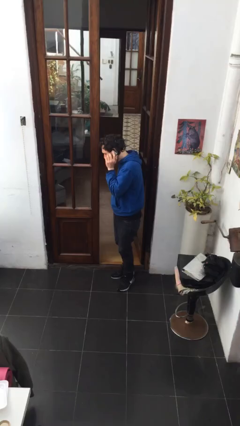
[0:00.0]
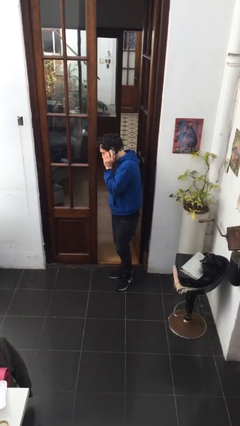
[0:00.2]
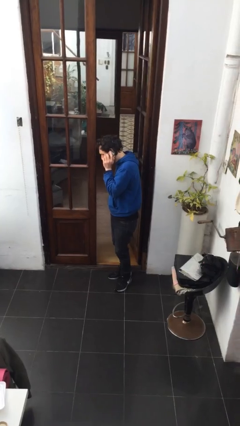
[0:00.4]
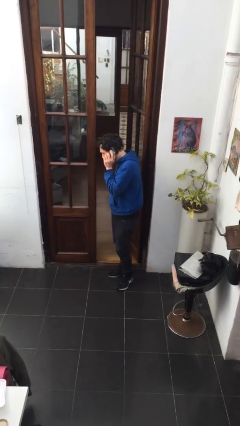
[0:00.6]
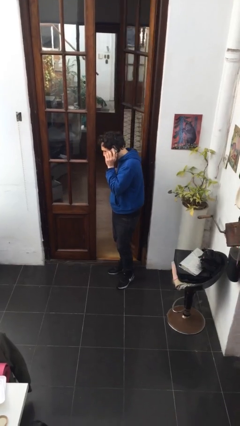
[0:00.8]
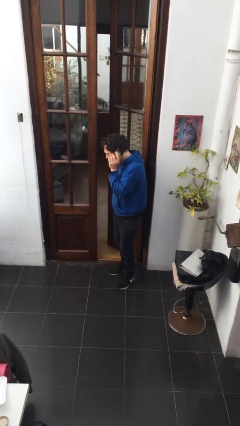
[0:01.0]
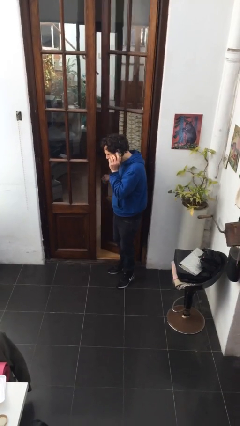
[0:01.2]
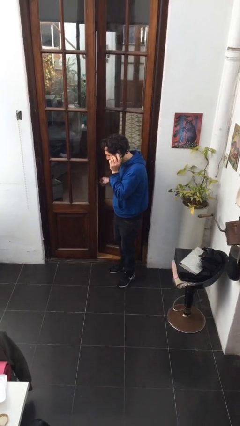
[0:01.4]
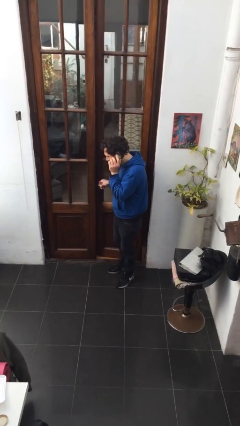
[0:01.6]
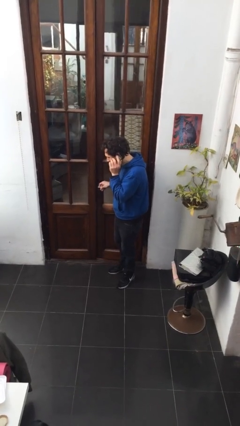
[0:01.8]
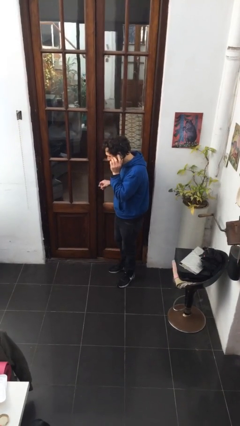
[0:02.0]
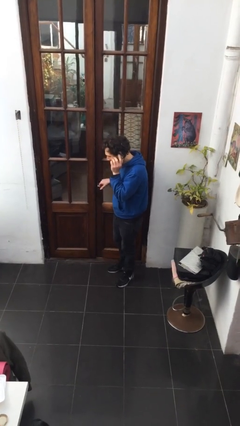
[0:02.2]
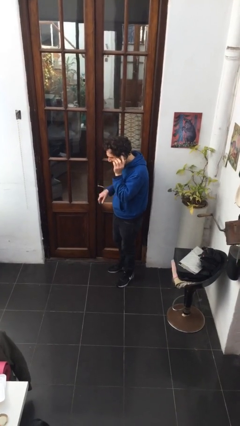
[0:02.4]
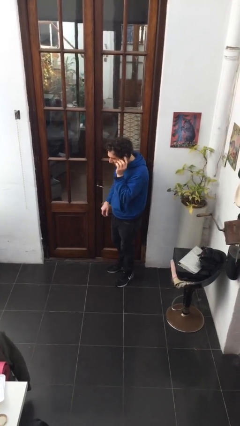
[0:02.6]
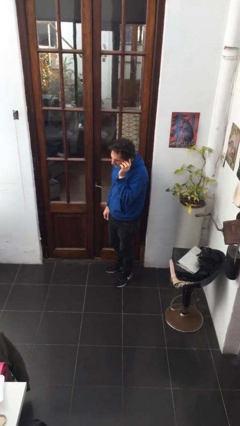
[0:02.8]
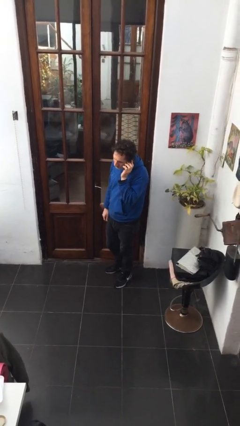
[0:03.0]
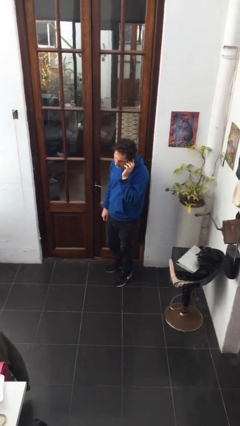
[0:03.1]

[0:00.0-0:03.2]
person closes facility door

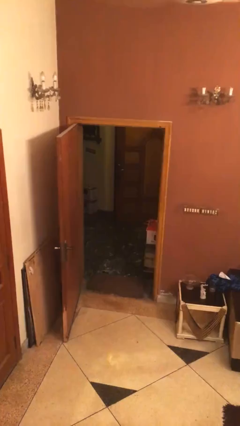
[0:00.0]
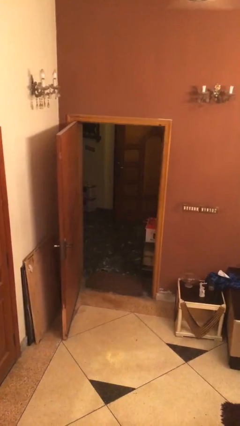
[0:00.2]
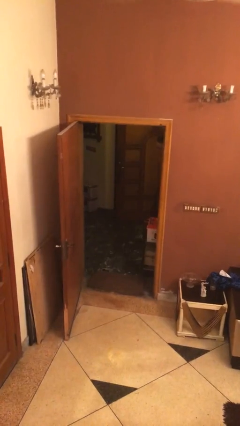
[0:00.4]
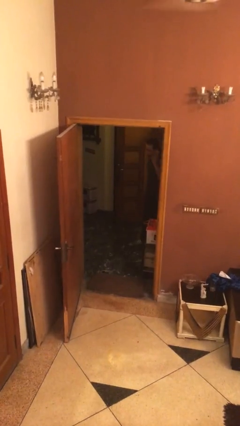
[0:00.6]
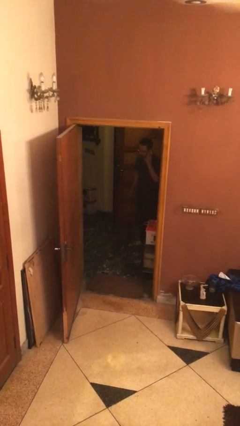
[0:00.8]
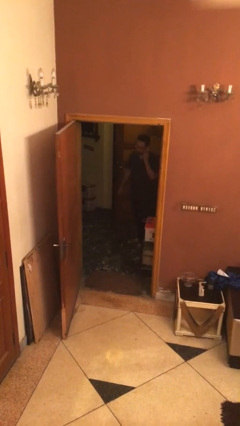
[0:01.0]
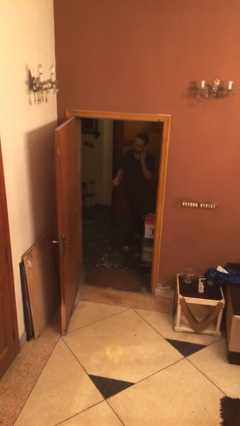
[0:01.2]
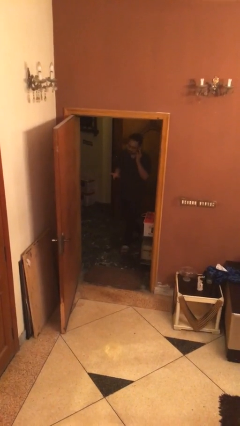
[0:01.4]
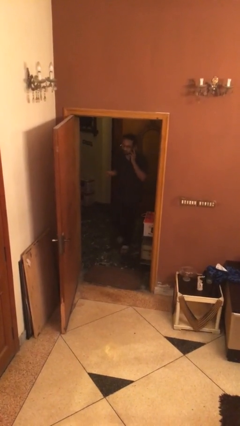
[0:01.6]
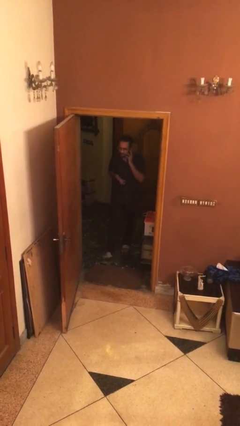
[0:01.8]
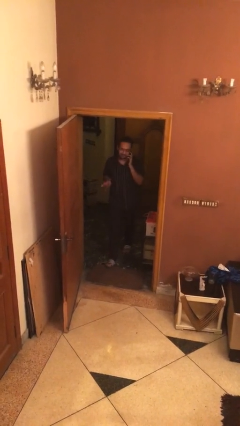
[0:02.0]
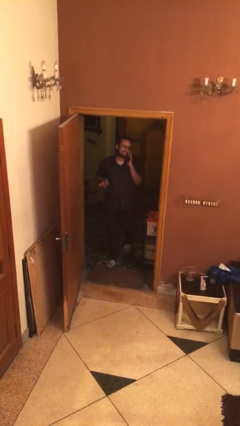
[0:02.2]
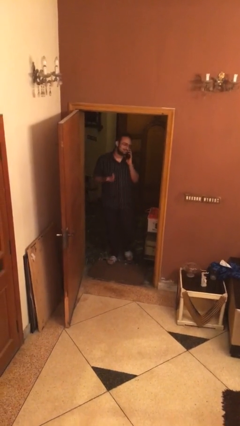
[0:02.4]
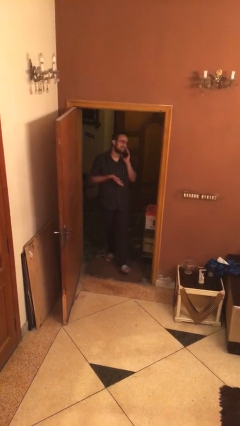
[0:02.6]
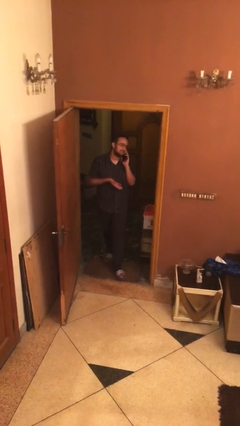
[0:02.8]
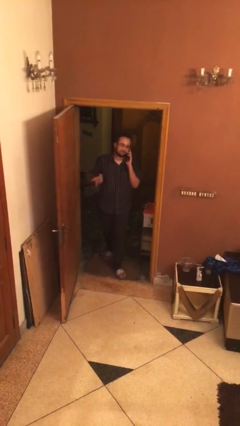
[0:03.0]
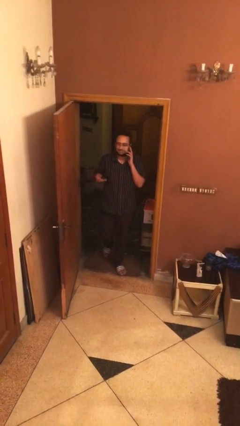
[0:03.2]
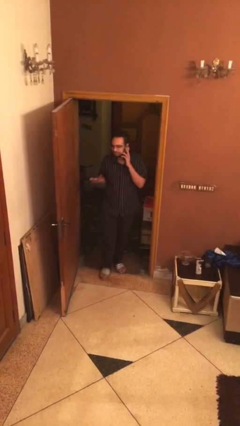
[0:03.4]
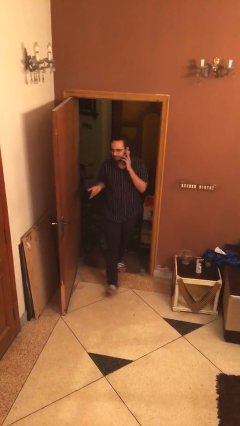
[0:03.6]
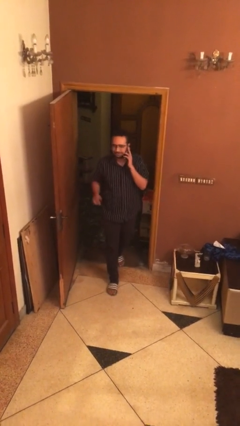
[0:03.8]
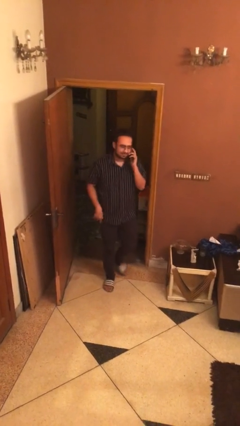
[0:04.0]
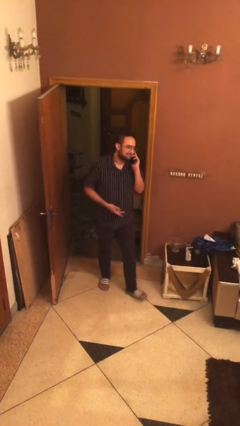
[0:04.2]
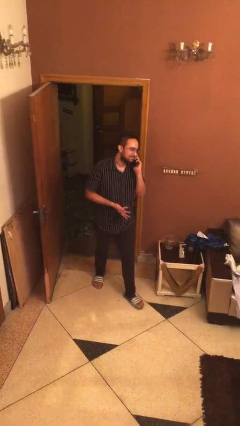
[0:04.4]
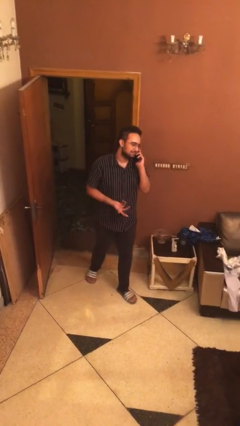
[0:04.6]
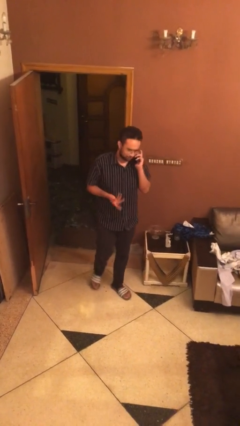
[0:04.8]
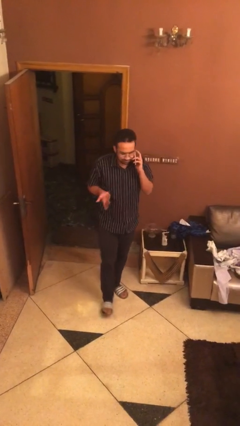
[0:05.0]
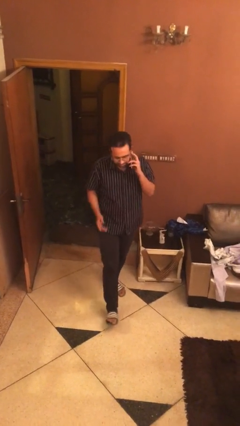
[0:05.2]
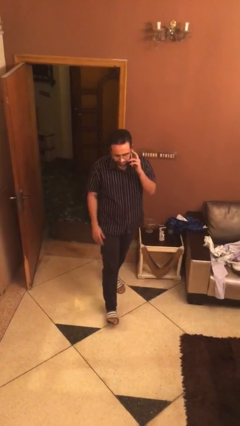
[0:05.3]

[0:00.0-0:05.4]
person enters scene through structure

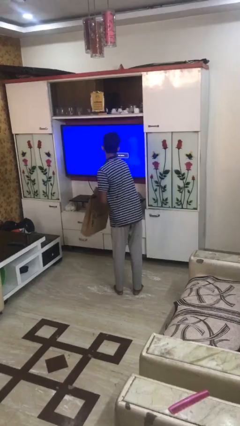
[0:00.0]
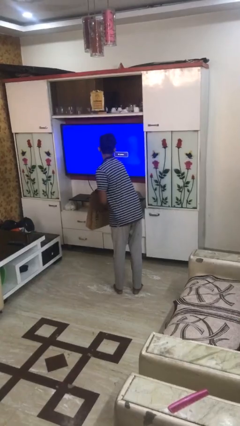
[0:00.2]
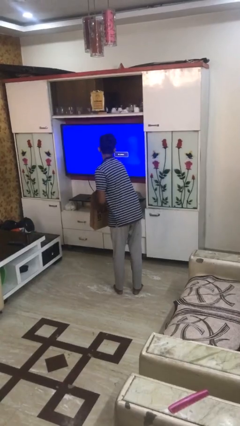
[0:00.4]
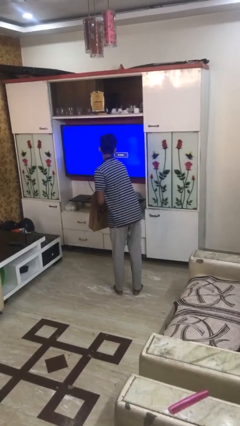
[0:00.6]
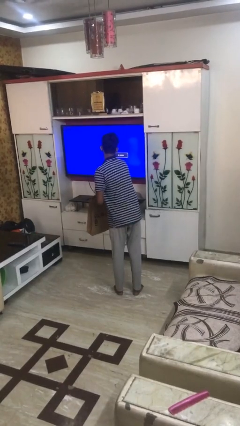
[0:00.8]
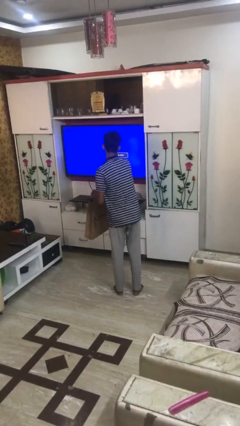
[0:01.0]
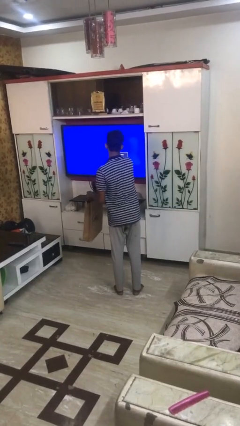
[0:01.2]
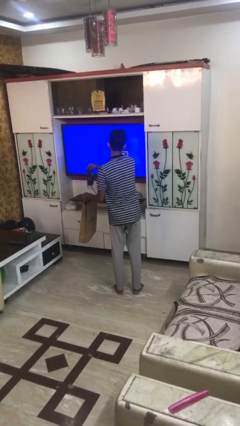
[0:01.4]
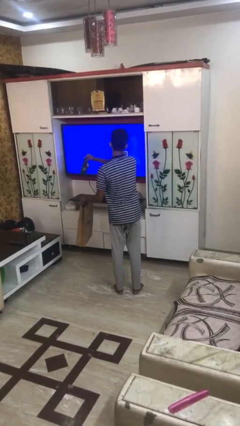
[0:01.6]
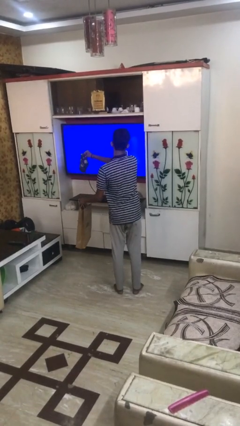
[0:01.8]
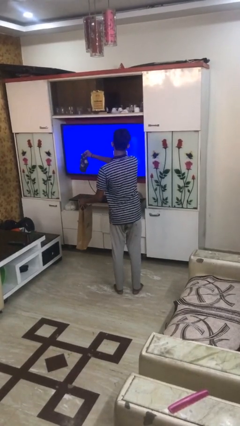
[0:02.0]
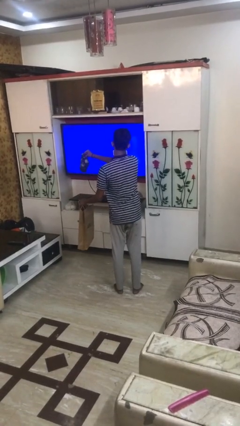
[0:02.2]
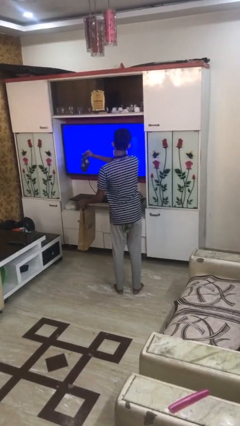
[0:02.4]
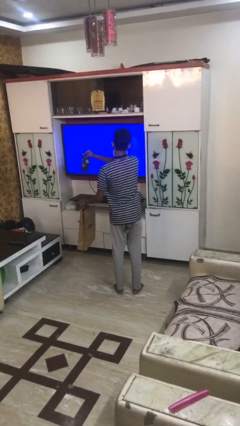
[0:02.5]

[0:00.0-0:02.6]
person takes object from bag

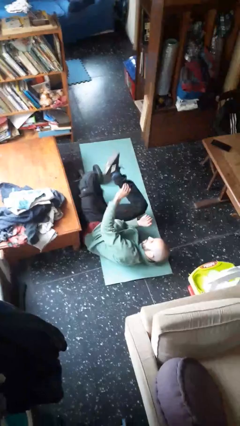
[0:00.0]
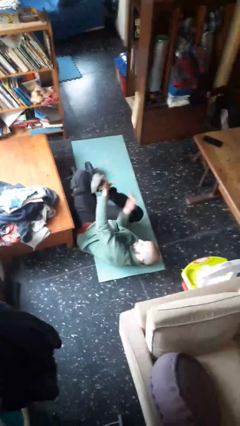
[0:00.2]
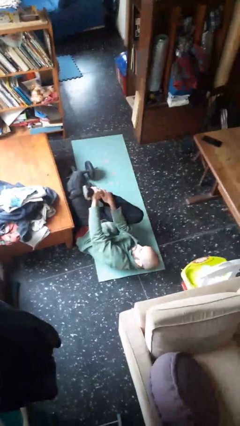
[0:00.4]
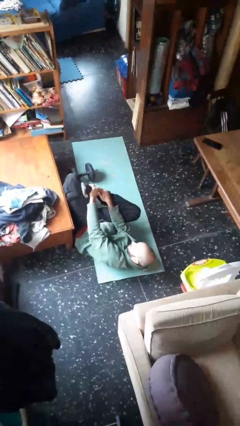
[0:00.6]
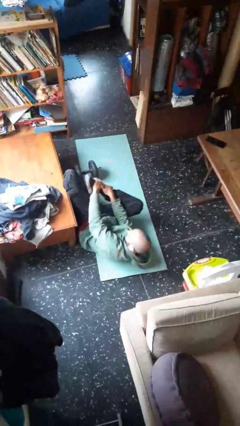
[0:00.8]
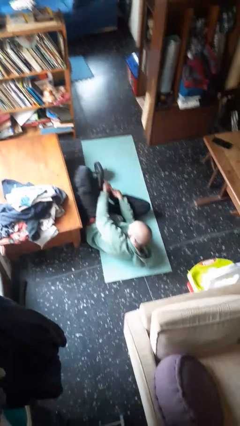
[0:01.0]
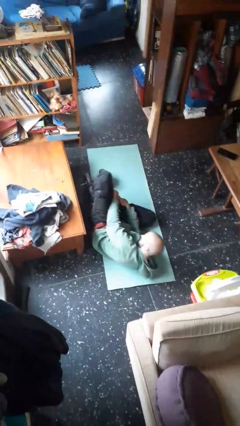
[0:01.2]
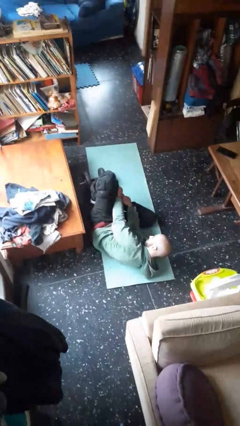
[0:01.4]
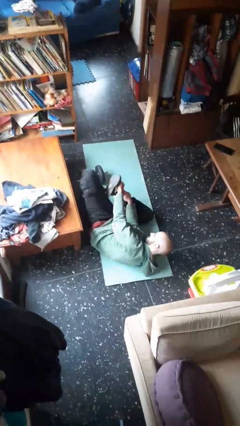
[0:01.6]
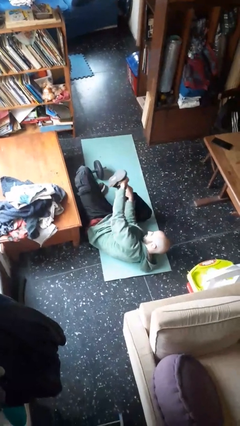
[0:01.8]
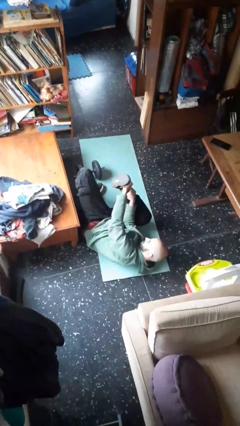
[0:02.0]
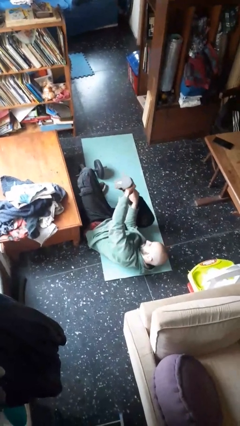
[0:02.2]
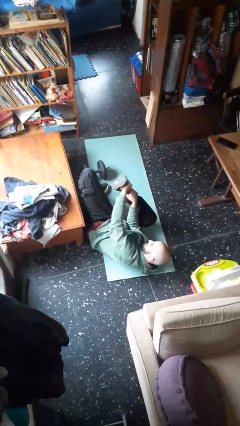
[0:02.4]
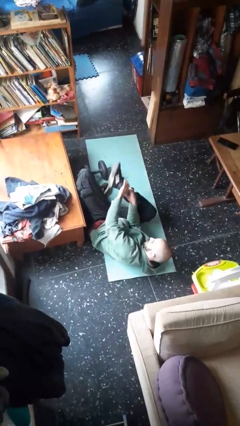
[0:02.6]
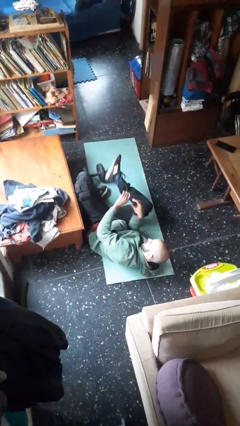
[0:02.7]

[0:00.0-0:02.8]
person lies down on floor

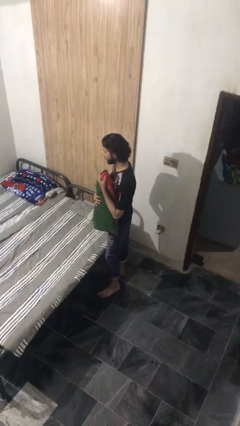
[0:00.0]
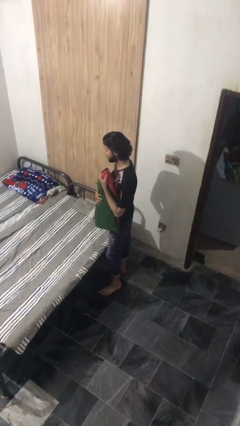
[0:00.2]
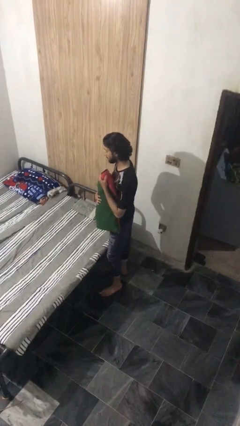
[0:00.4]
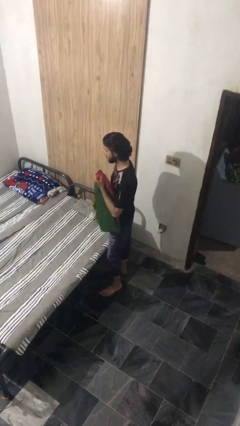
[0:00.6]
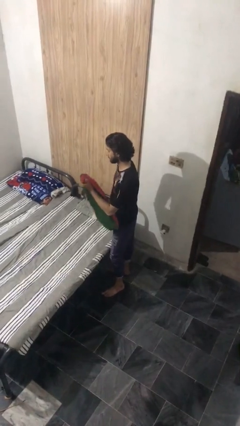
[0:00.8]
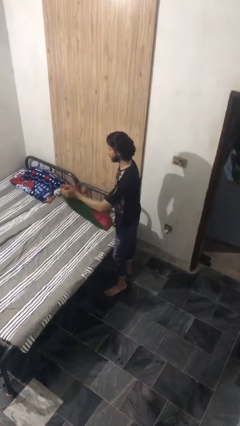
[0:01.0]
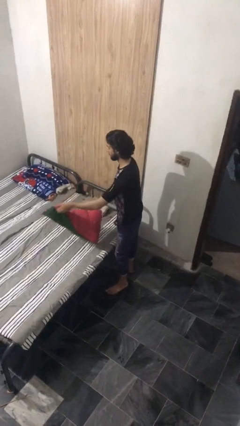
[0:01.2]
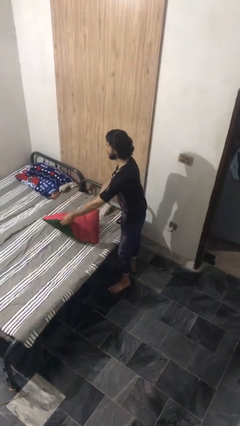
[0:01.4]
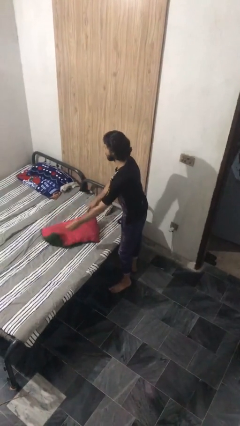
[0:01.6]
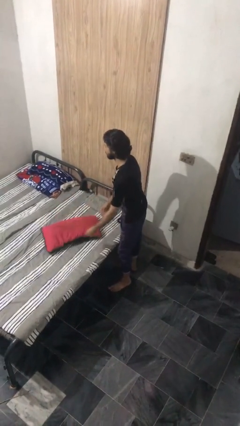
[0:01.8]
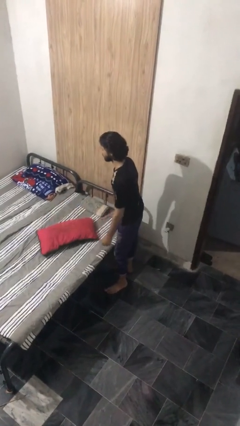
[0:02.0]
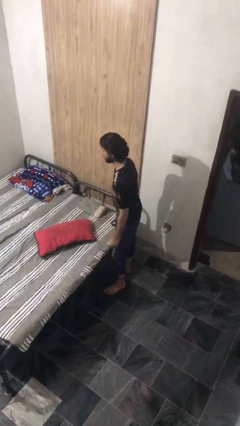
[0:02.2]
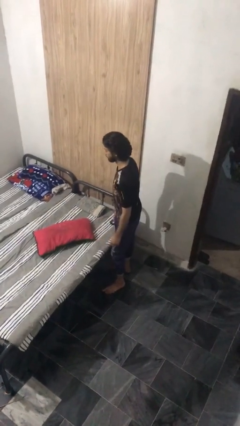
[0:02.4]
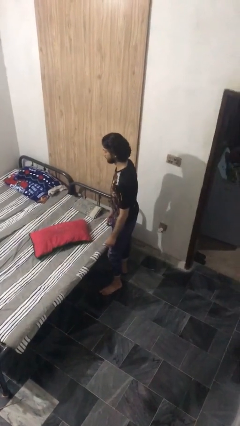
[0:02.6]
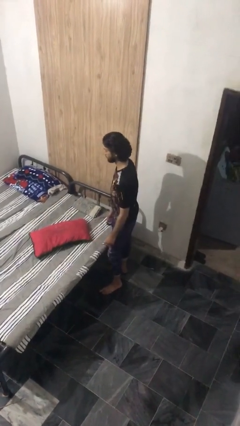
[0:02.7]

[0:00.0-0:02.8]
person puts down object on bed

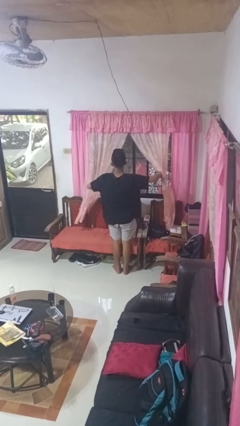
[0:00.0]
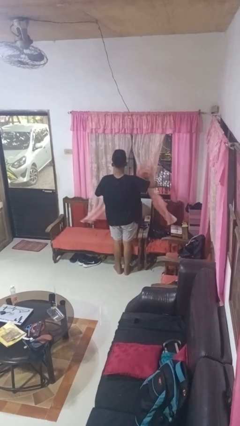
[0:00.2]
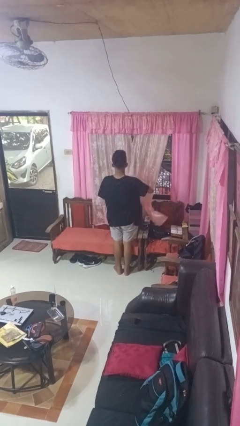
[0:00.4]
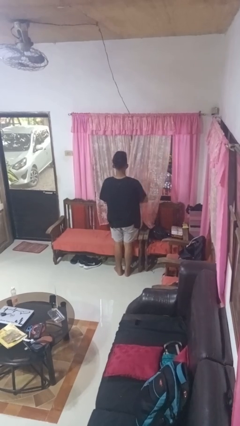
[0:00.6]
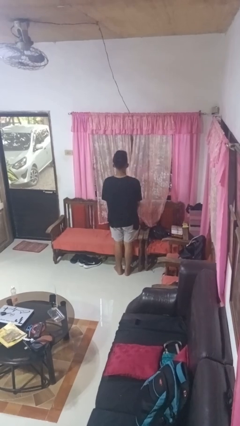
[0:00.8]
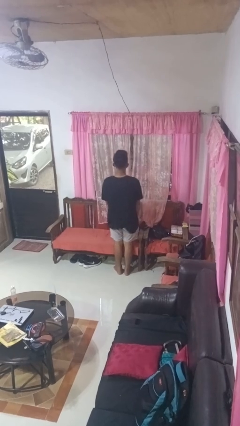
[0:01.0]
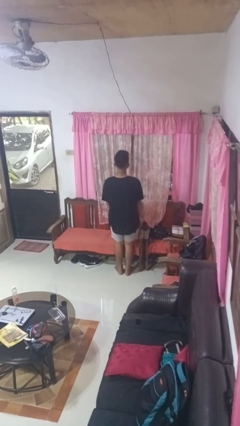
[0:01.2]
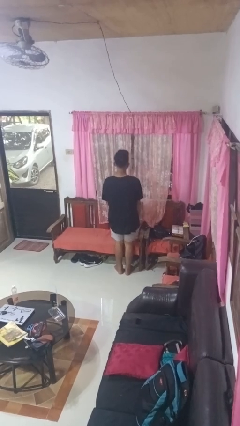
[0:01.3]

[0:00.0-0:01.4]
person closes curtains
